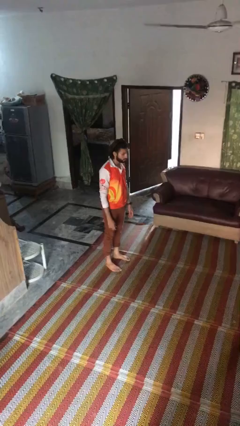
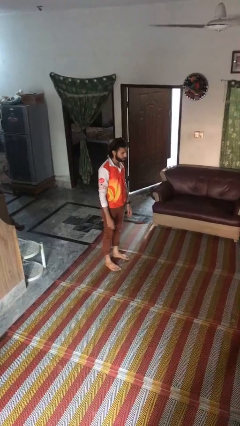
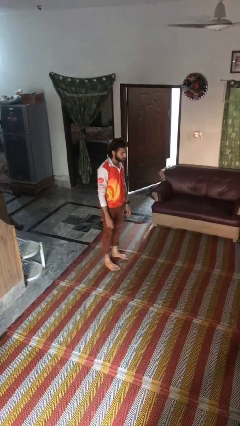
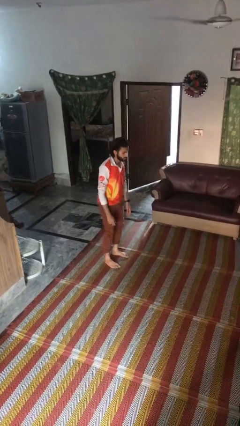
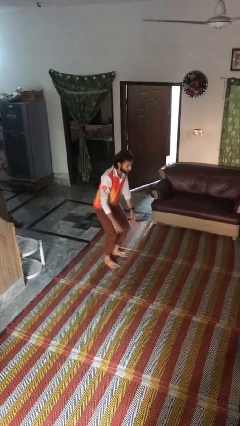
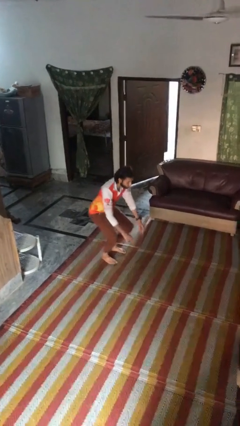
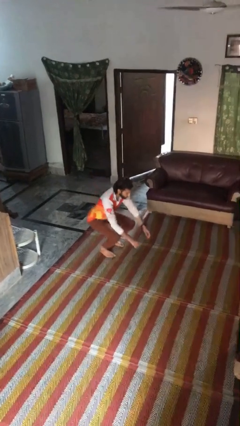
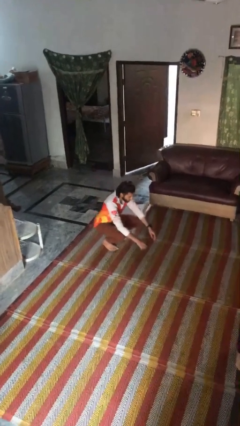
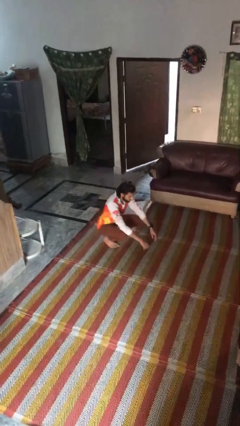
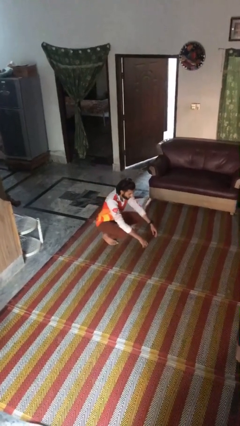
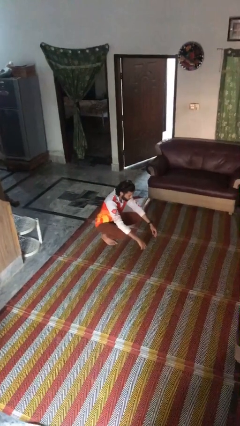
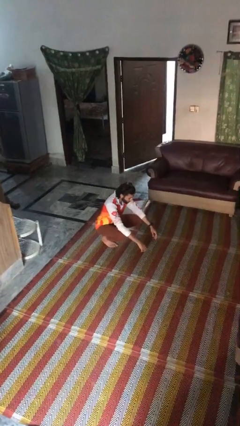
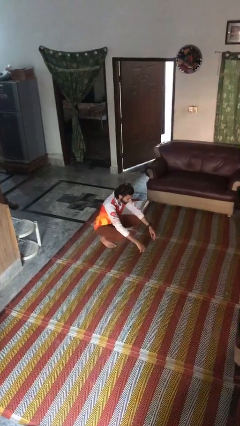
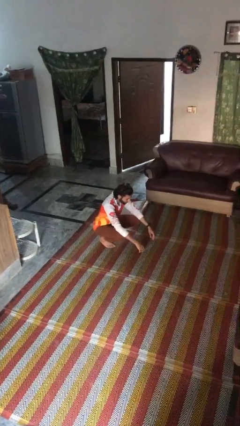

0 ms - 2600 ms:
person squats

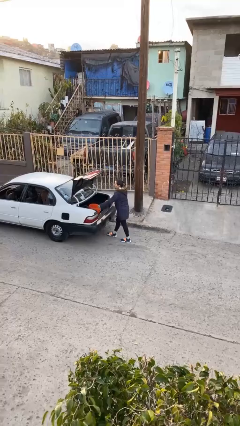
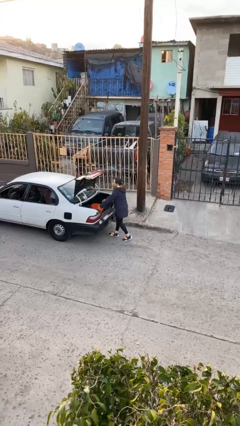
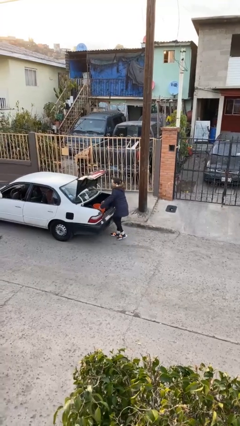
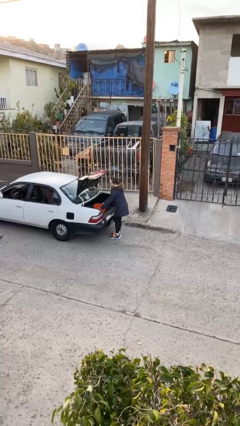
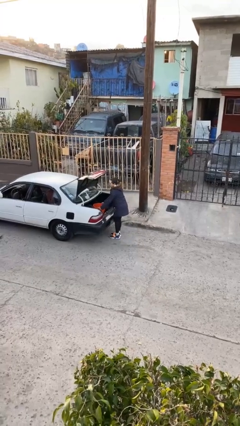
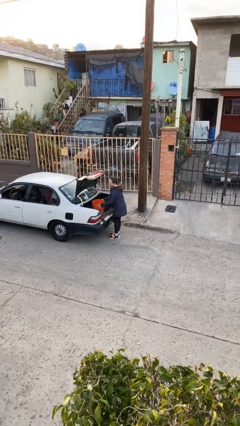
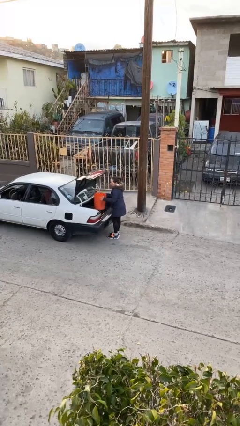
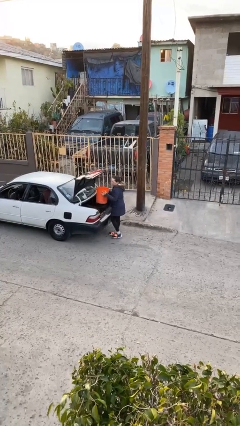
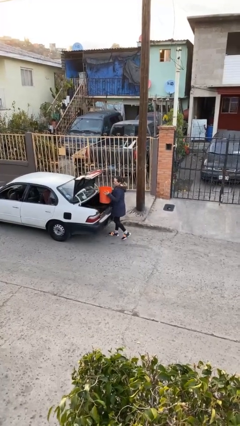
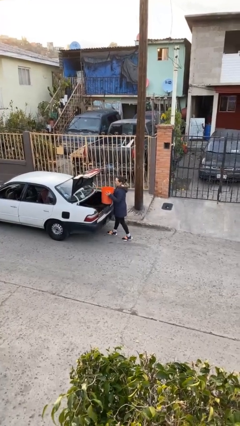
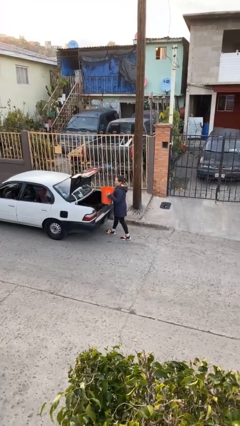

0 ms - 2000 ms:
person unloads car

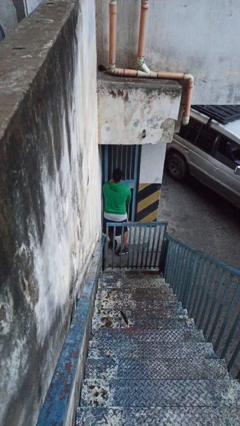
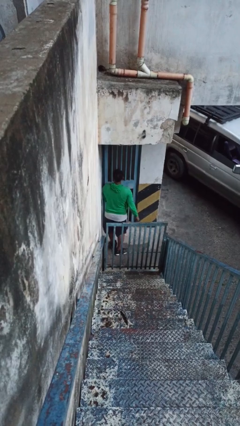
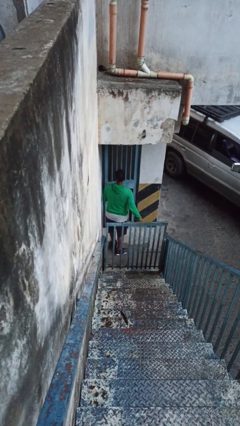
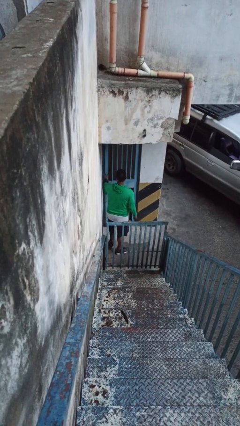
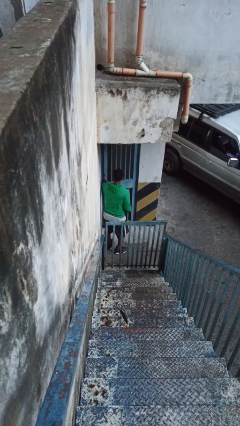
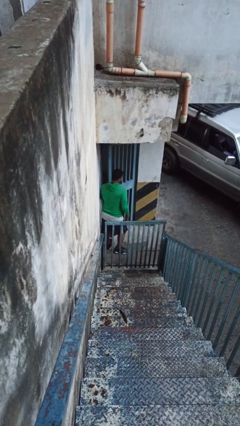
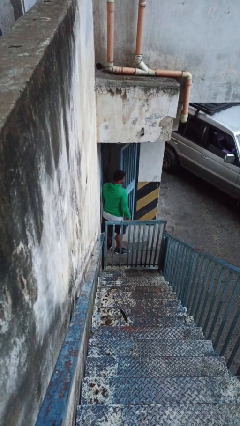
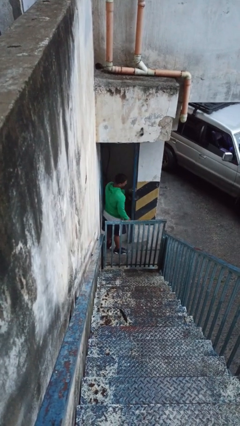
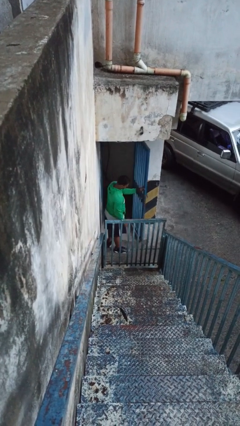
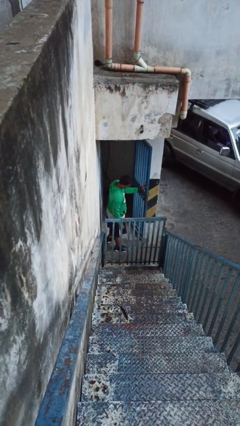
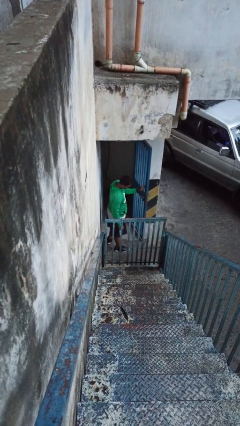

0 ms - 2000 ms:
person opens facility door

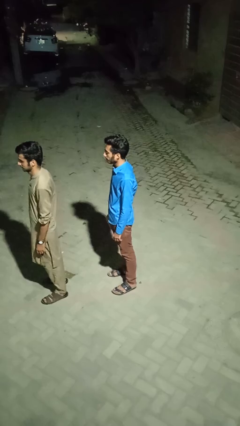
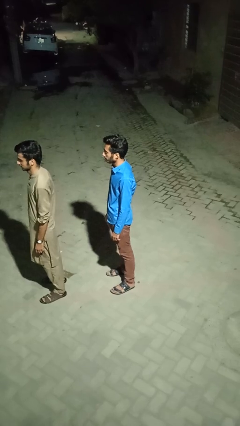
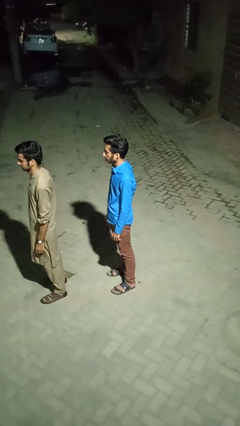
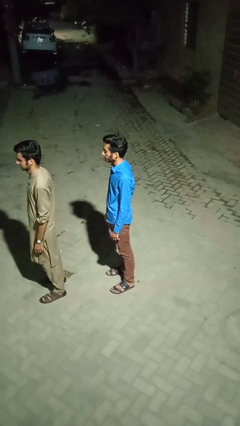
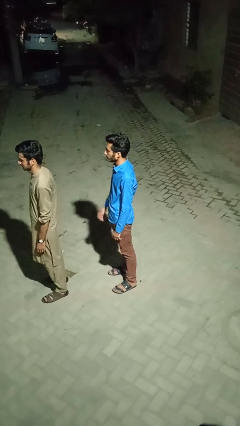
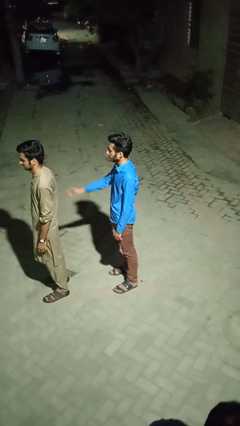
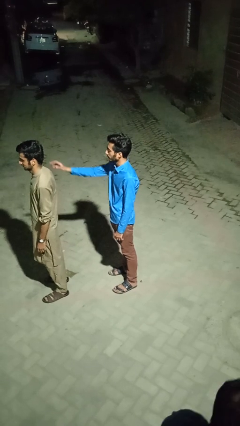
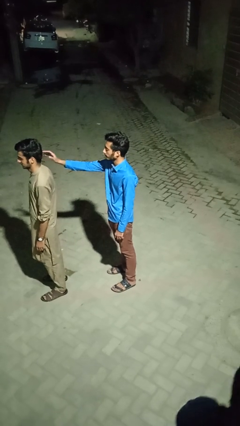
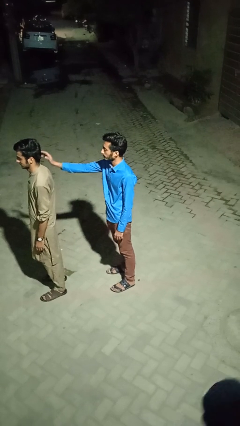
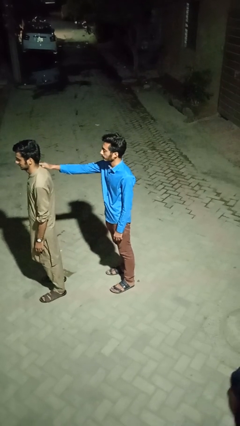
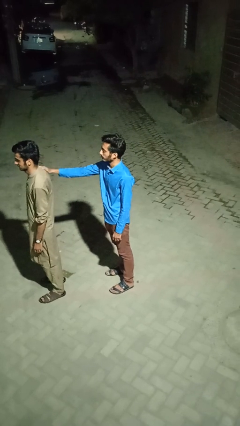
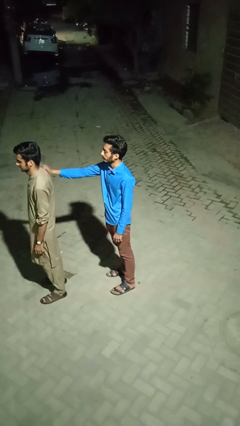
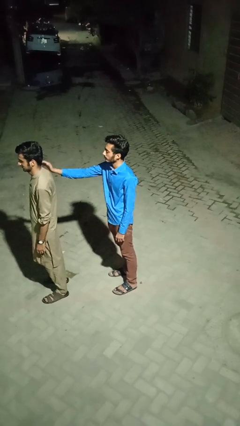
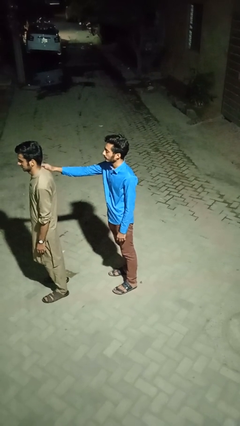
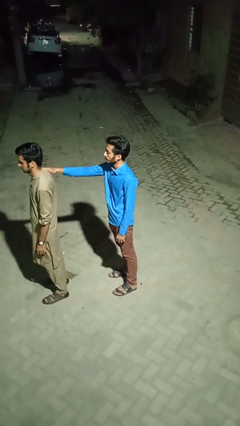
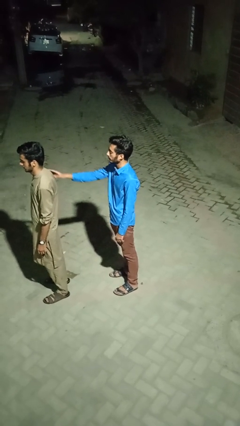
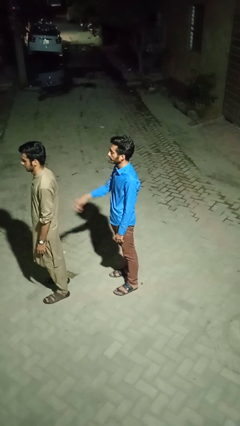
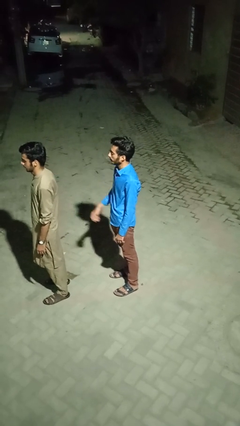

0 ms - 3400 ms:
person touches back of person

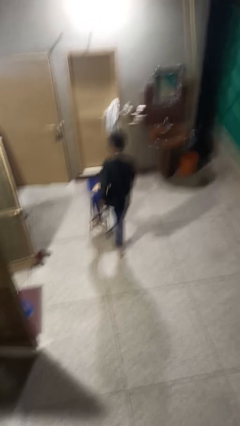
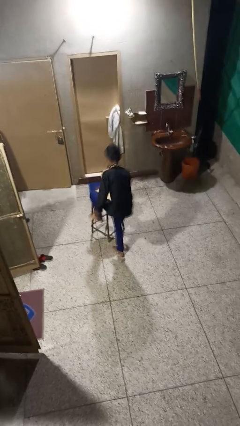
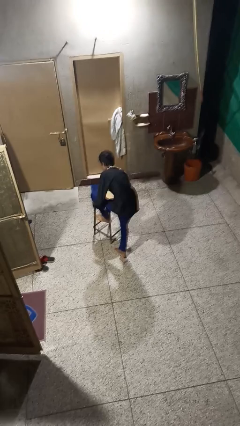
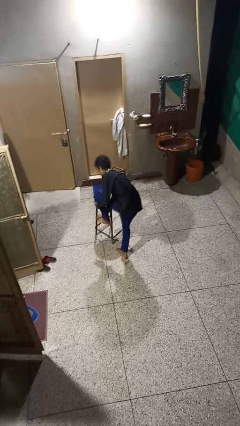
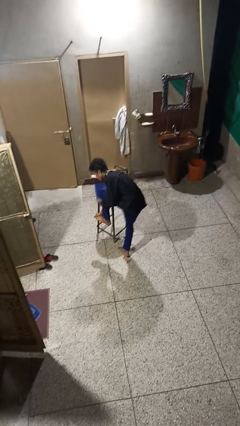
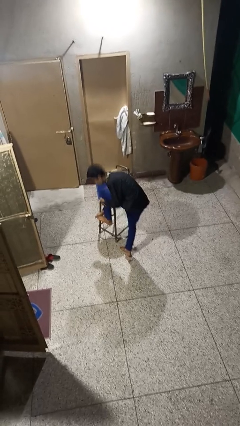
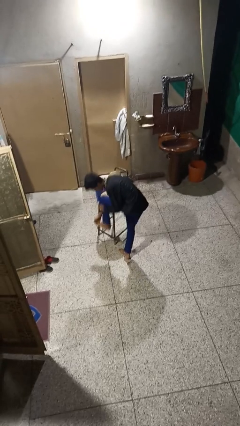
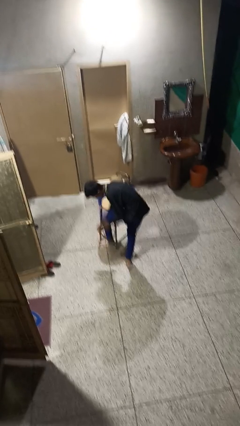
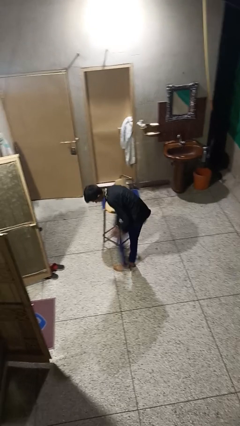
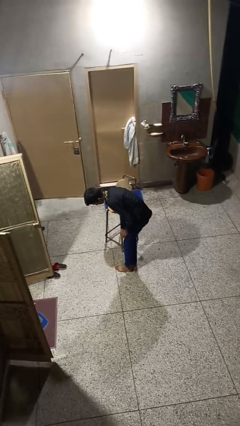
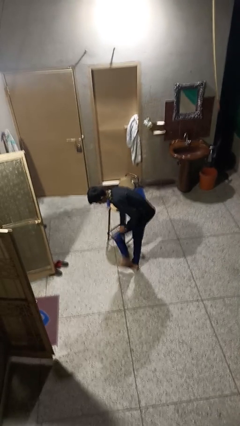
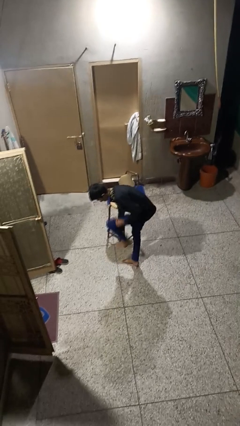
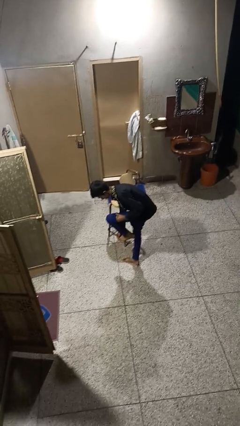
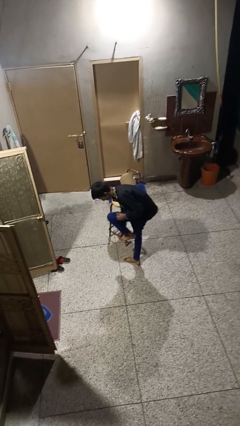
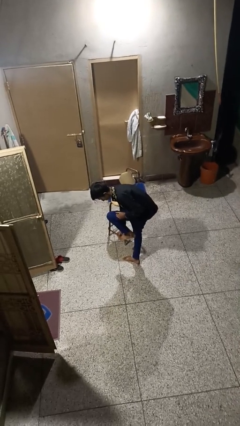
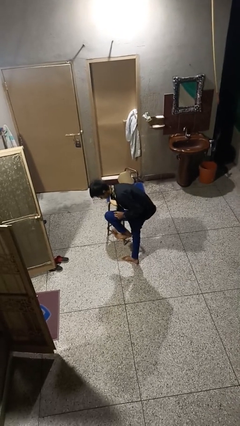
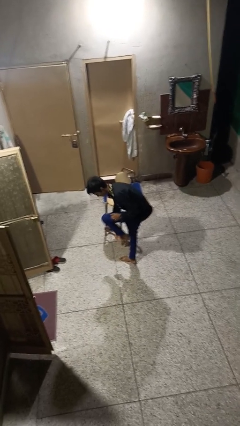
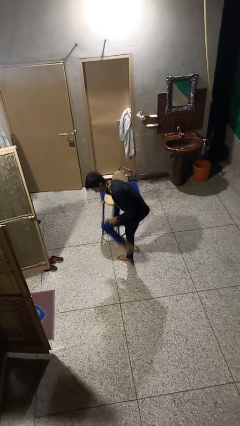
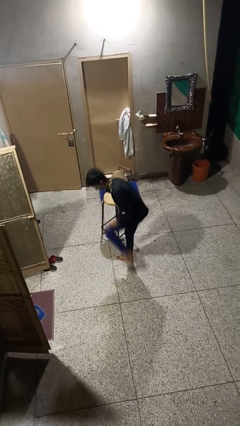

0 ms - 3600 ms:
person stubs toe

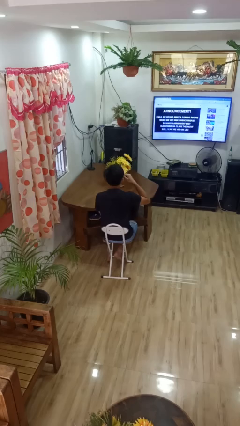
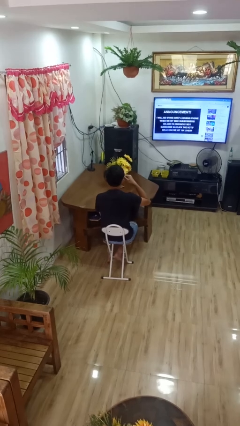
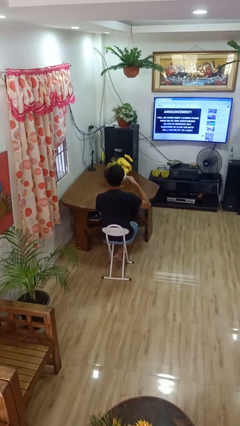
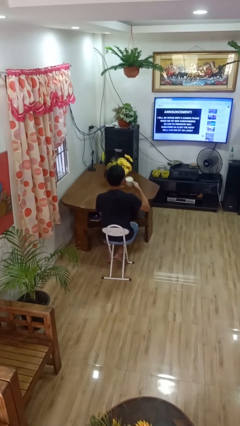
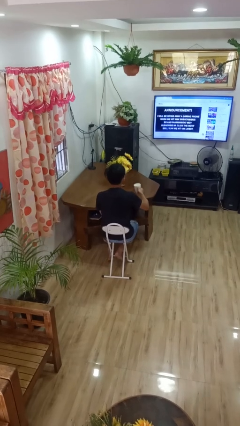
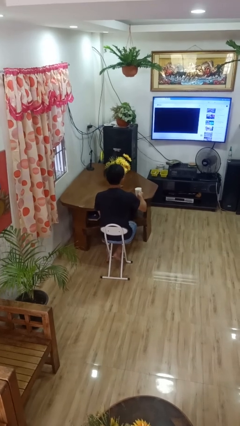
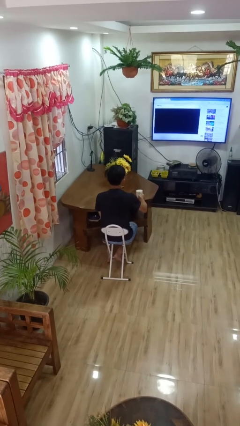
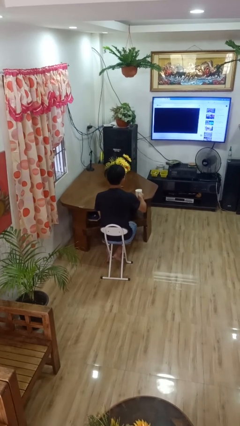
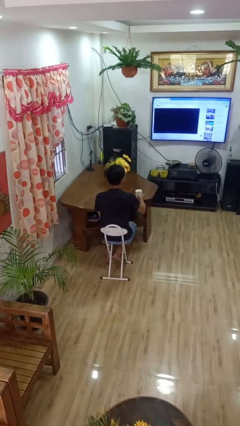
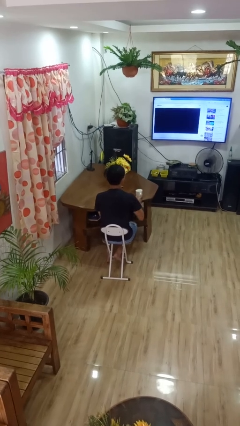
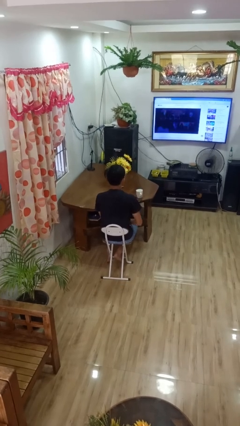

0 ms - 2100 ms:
person puts down object on table

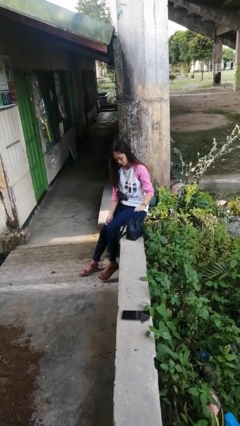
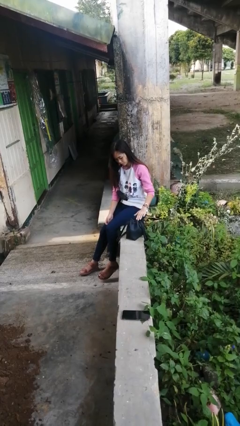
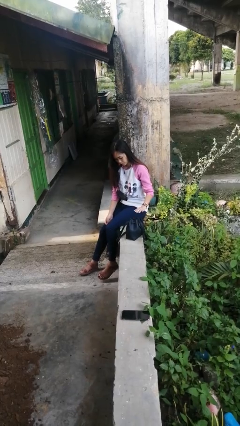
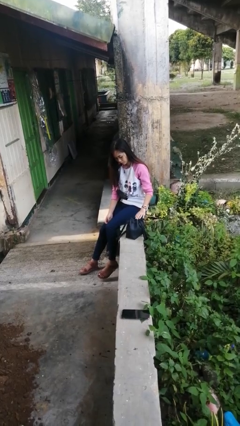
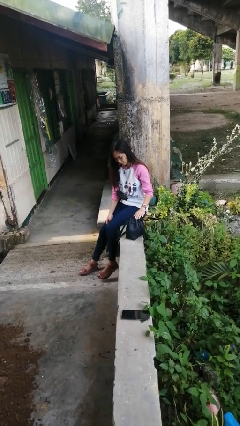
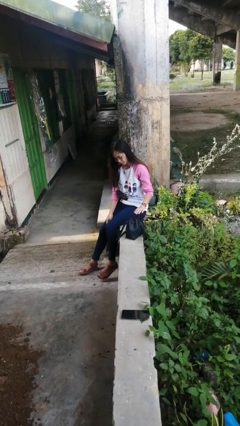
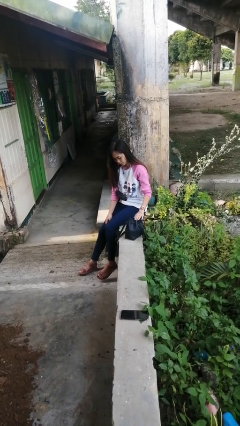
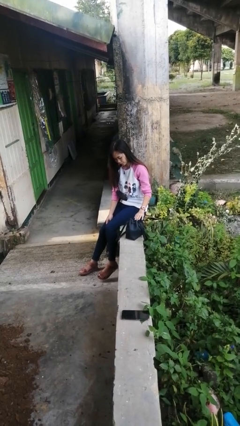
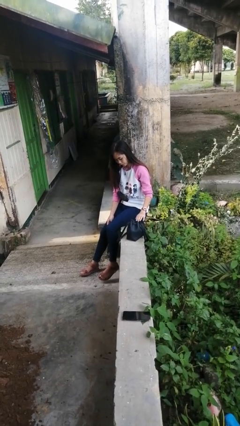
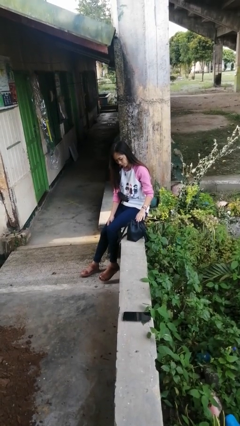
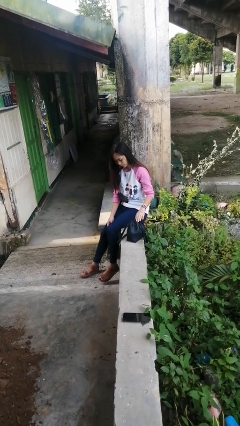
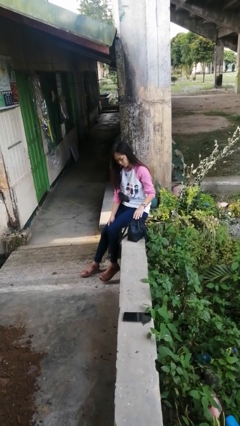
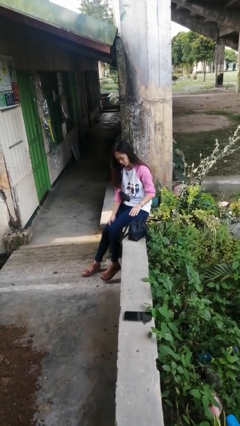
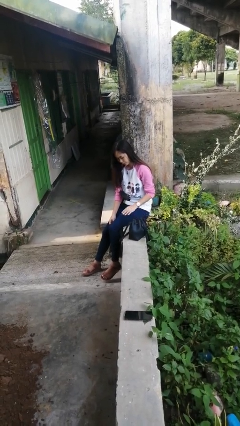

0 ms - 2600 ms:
person taps object with finger
